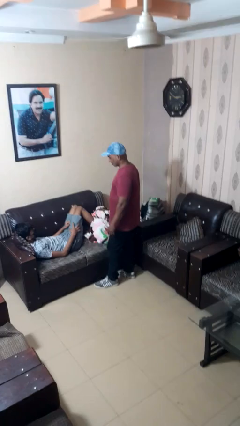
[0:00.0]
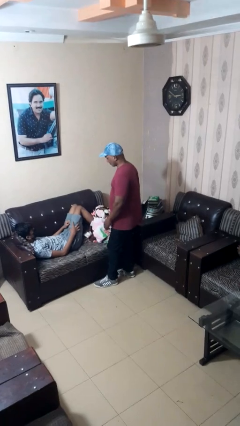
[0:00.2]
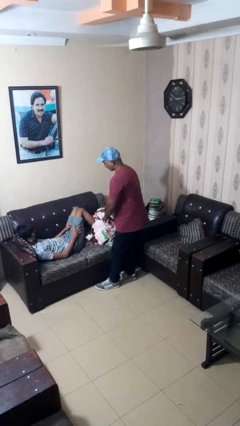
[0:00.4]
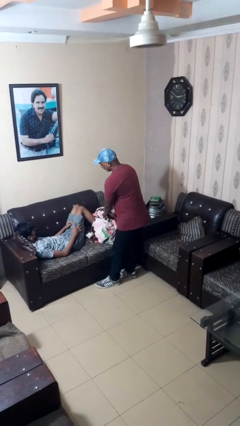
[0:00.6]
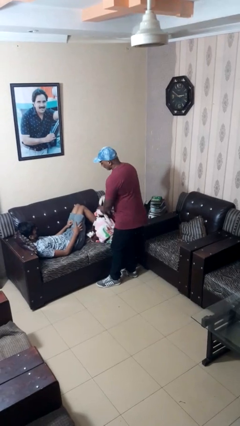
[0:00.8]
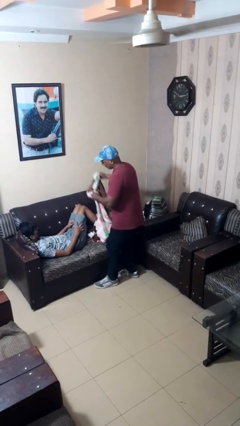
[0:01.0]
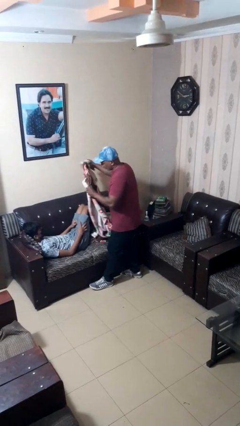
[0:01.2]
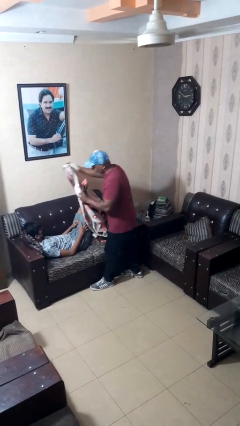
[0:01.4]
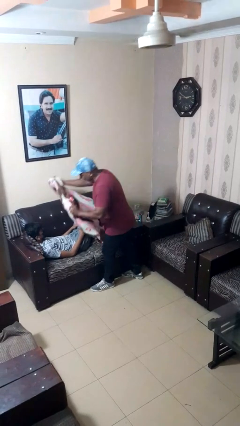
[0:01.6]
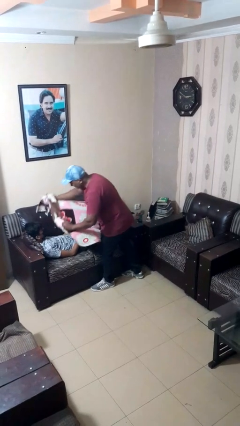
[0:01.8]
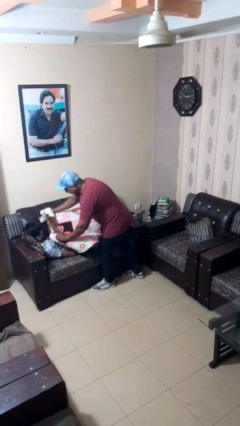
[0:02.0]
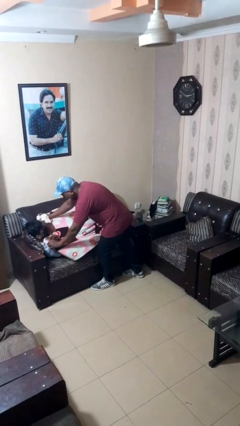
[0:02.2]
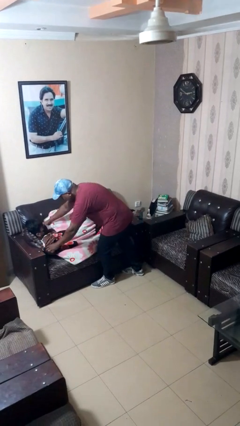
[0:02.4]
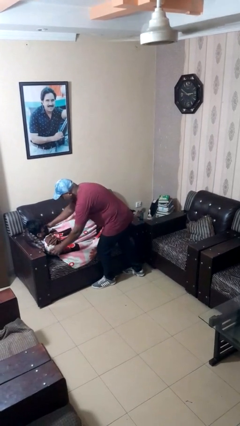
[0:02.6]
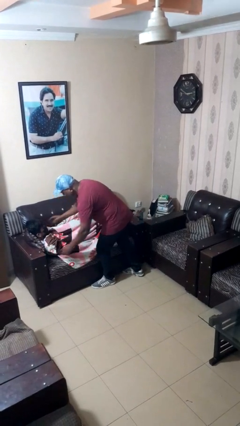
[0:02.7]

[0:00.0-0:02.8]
person covers friend with blanket

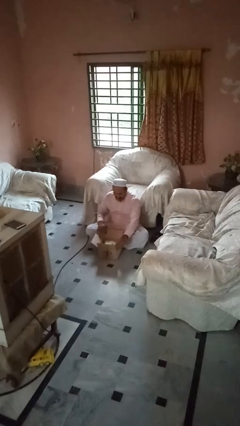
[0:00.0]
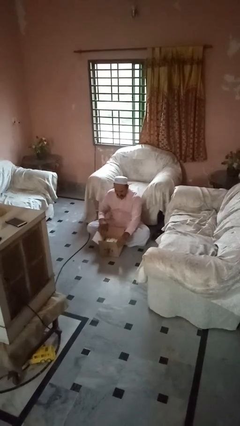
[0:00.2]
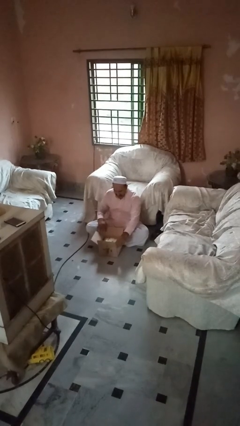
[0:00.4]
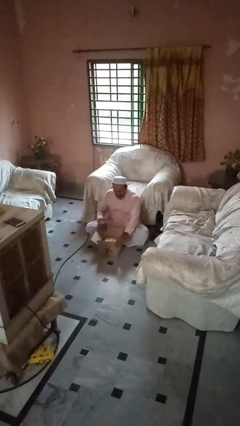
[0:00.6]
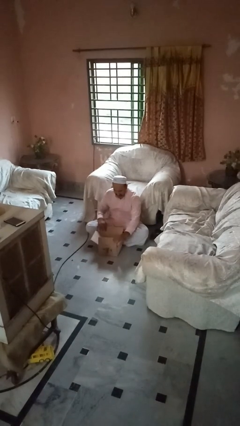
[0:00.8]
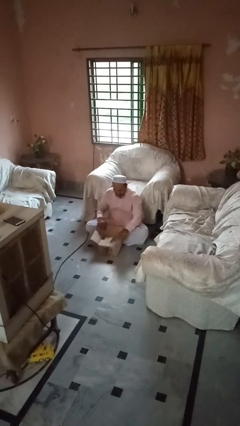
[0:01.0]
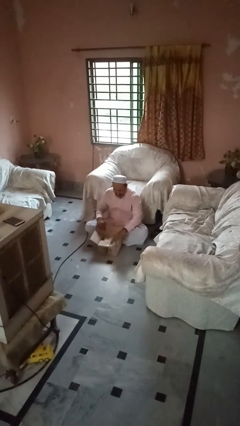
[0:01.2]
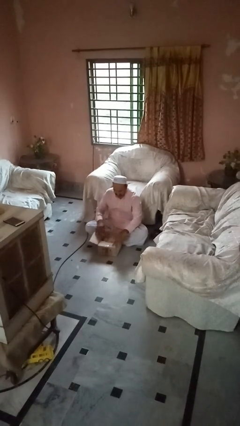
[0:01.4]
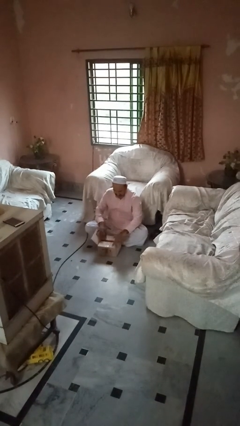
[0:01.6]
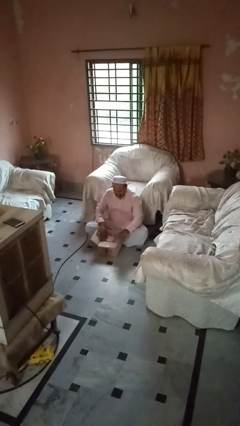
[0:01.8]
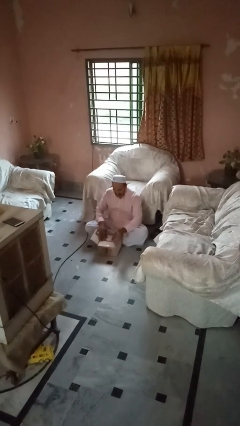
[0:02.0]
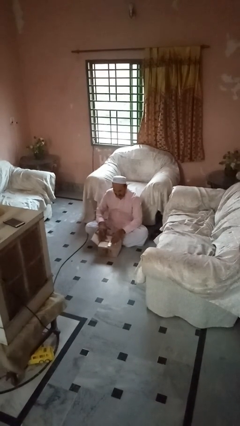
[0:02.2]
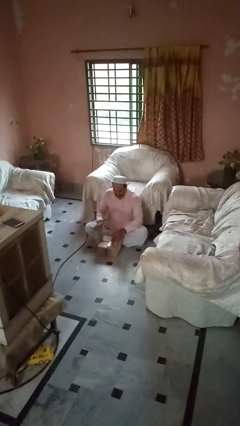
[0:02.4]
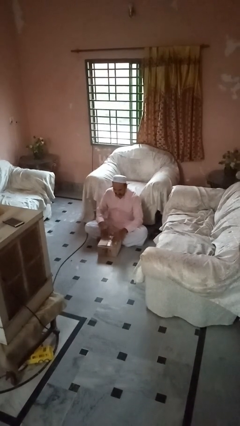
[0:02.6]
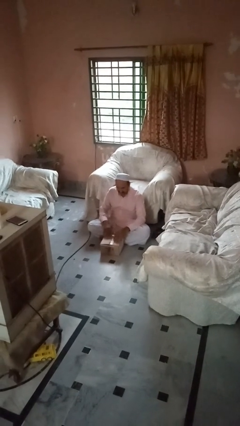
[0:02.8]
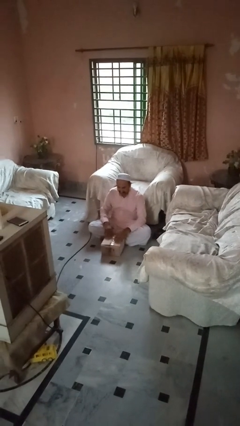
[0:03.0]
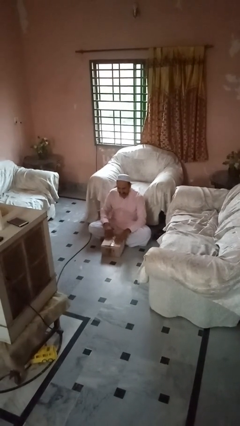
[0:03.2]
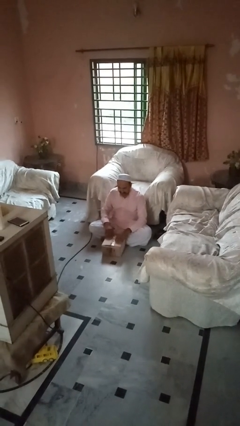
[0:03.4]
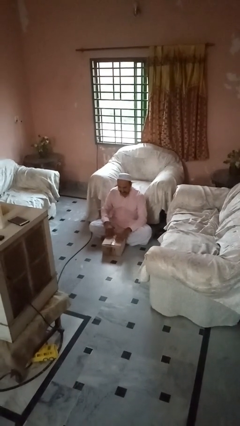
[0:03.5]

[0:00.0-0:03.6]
person closes box

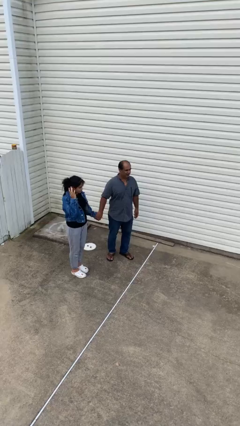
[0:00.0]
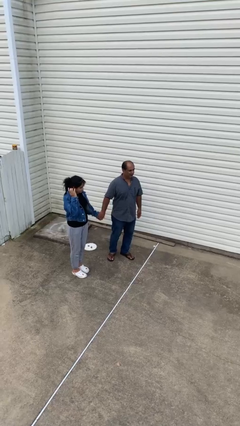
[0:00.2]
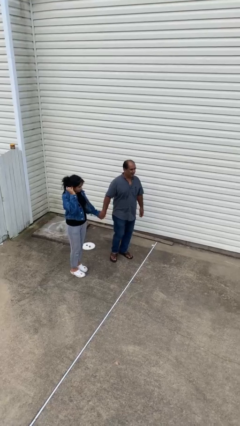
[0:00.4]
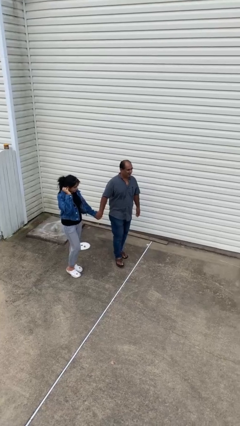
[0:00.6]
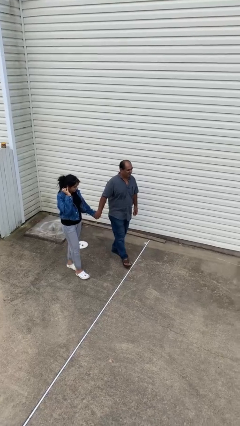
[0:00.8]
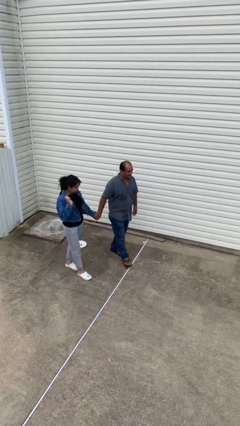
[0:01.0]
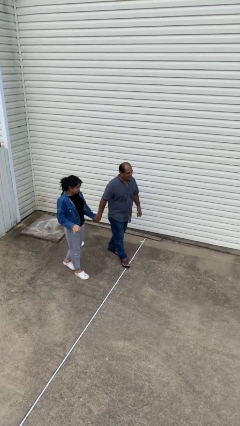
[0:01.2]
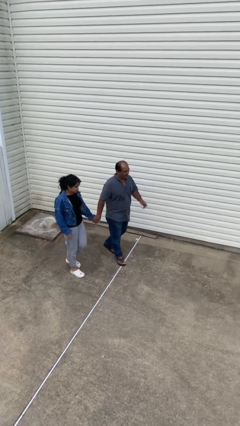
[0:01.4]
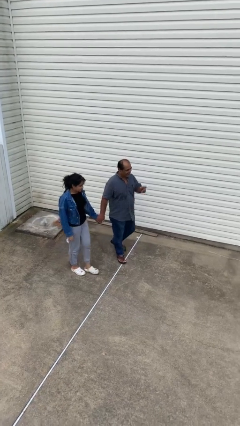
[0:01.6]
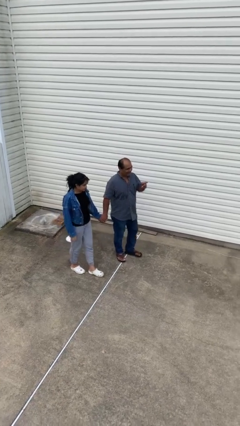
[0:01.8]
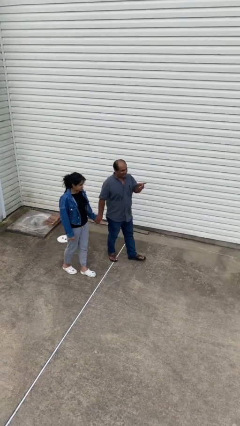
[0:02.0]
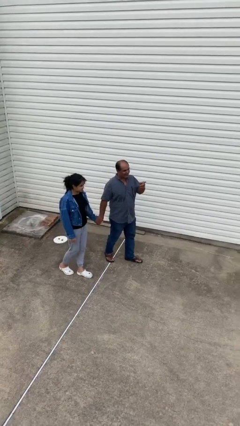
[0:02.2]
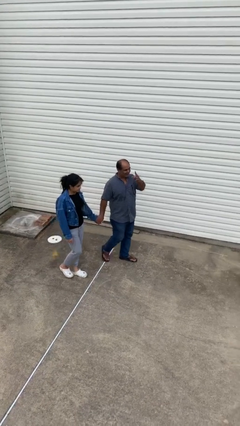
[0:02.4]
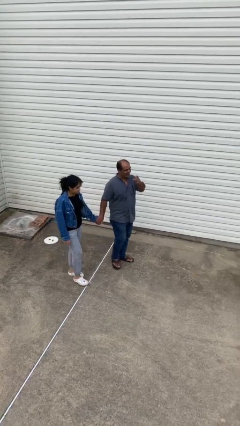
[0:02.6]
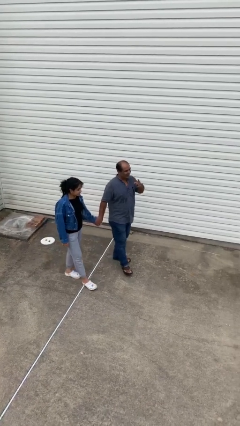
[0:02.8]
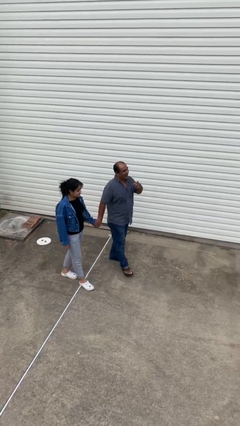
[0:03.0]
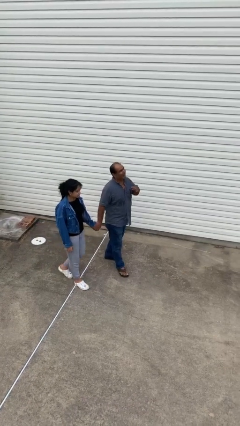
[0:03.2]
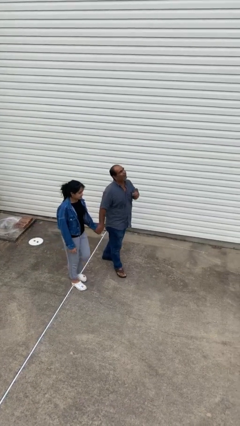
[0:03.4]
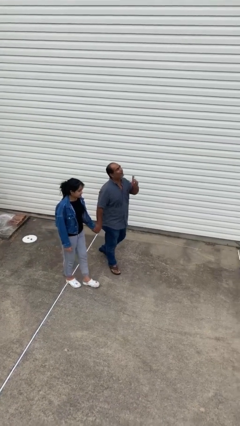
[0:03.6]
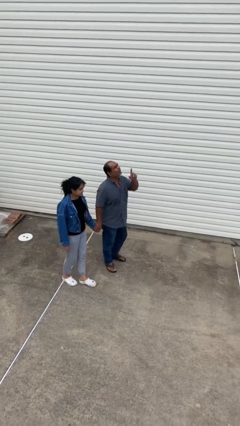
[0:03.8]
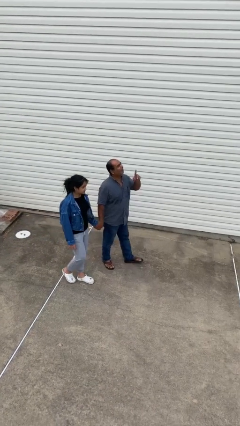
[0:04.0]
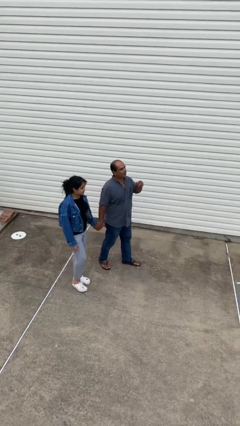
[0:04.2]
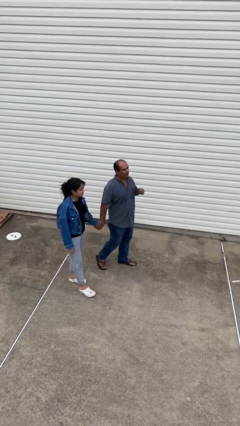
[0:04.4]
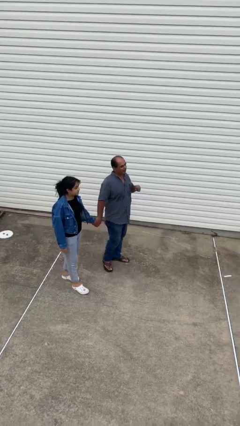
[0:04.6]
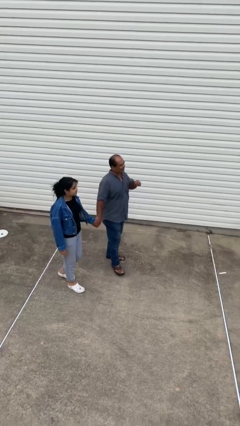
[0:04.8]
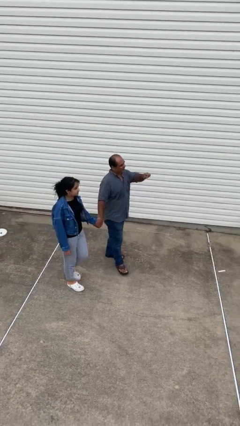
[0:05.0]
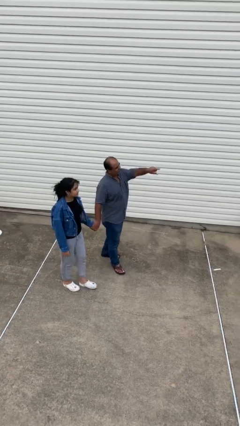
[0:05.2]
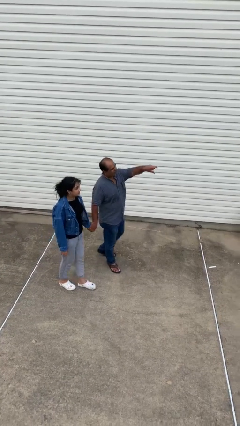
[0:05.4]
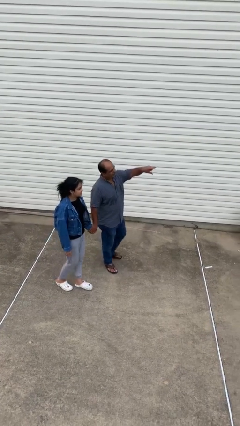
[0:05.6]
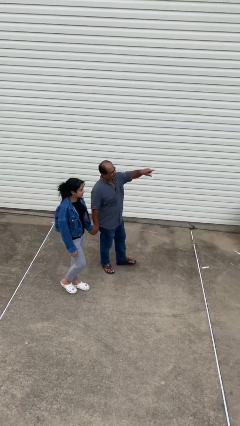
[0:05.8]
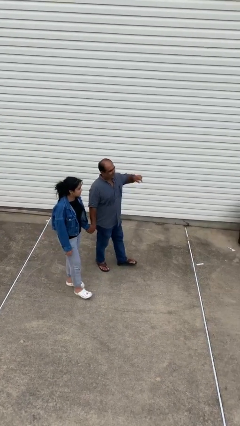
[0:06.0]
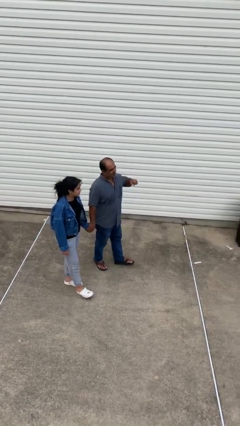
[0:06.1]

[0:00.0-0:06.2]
person holds hand

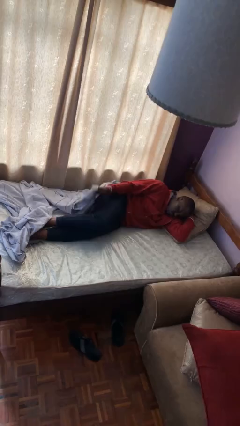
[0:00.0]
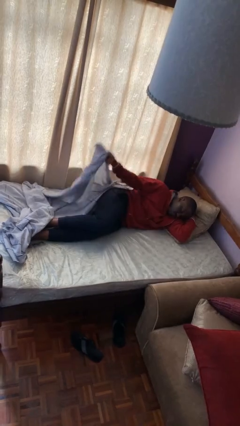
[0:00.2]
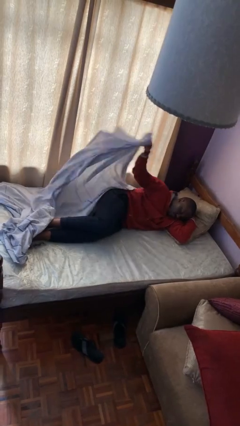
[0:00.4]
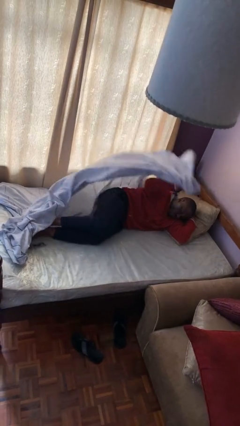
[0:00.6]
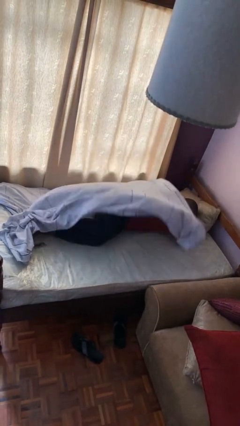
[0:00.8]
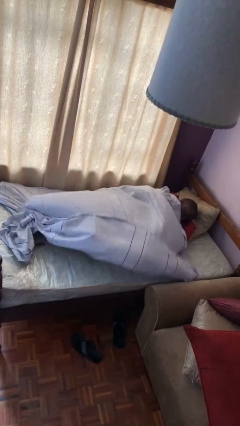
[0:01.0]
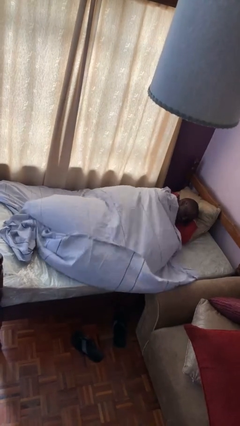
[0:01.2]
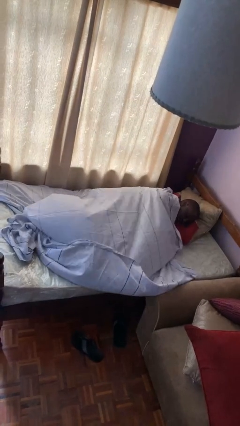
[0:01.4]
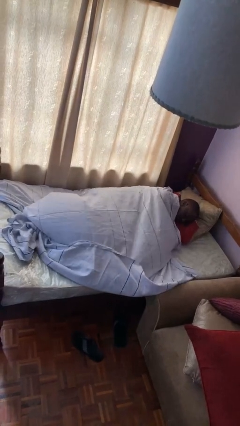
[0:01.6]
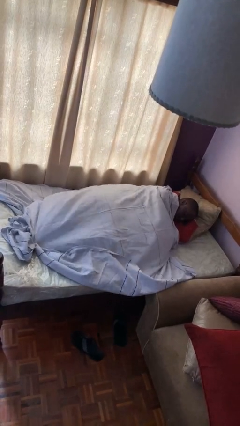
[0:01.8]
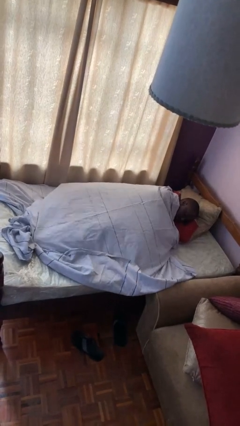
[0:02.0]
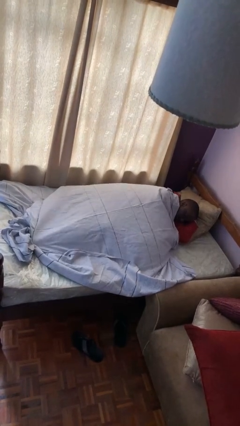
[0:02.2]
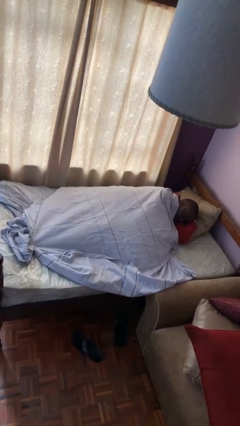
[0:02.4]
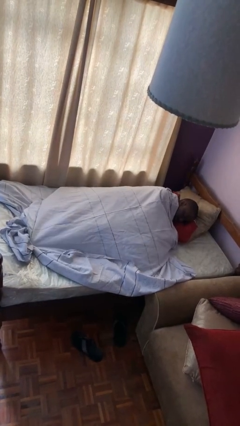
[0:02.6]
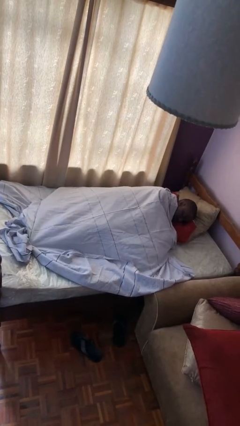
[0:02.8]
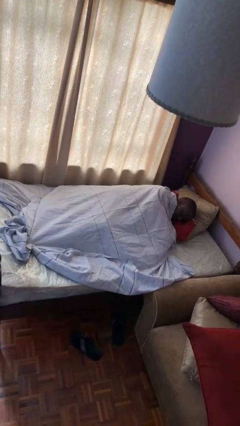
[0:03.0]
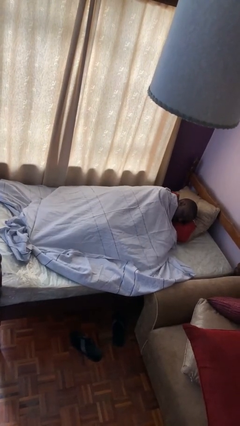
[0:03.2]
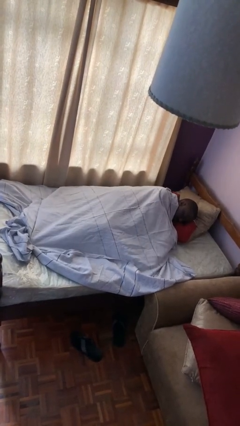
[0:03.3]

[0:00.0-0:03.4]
person covers with bedsheets

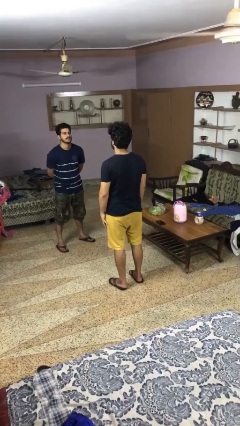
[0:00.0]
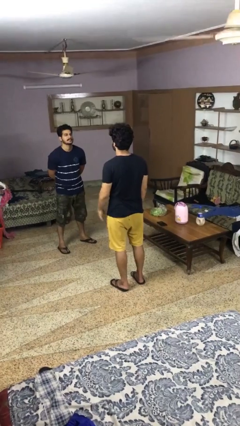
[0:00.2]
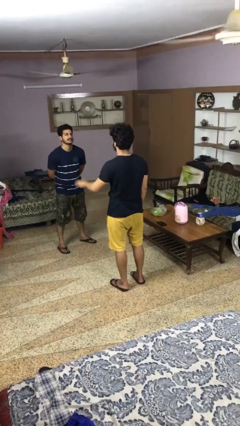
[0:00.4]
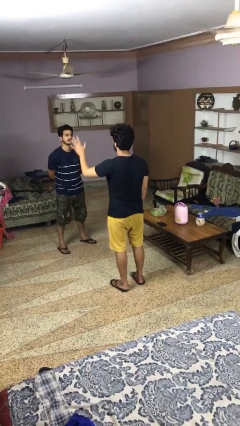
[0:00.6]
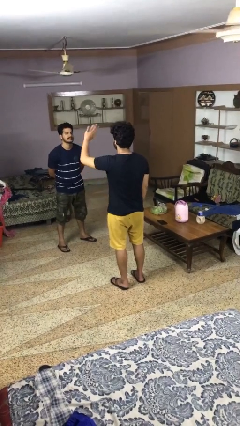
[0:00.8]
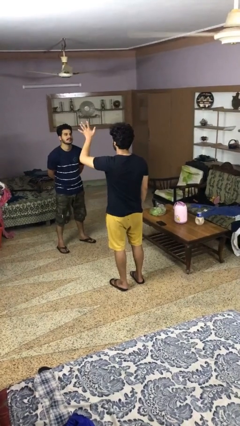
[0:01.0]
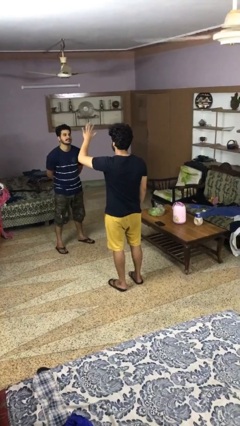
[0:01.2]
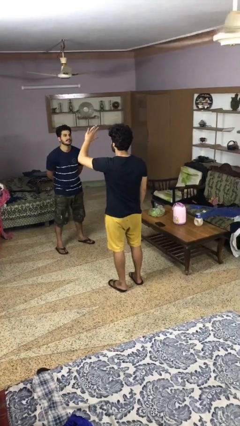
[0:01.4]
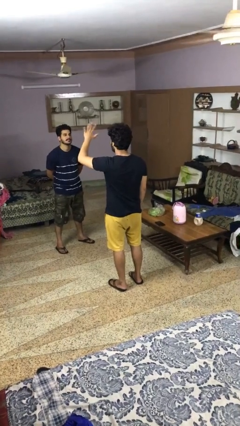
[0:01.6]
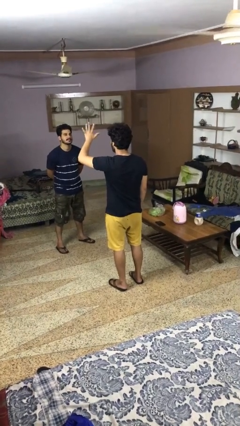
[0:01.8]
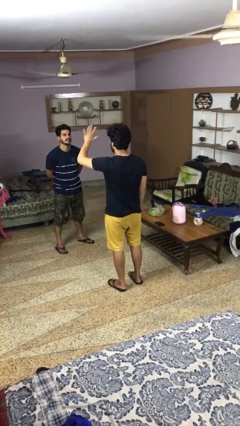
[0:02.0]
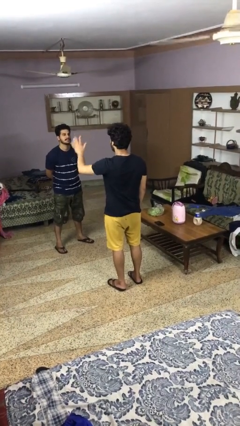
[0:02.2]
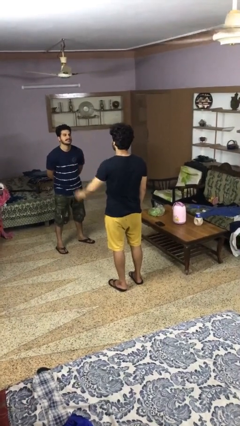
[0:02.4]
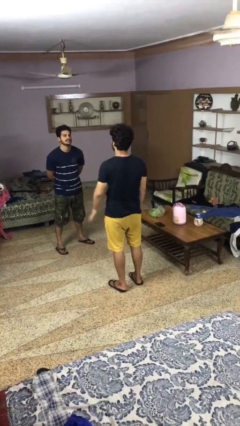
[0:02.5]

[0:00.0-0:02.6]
person waves at person
